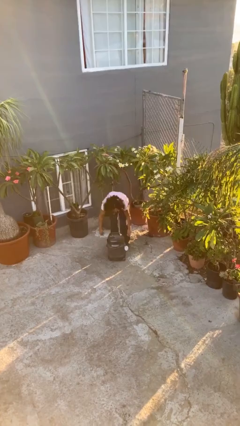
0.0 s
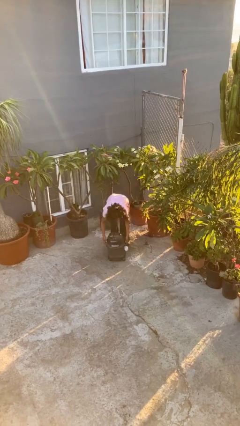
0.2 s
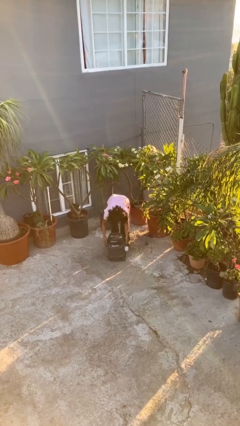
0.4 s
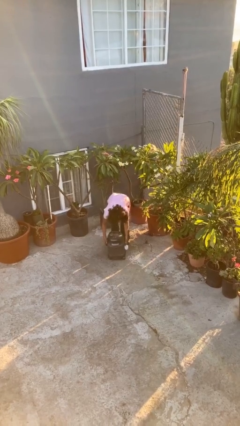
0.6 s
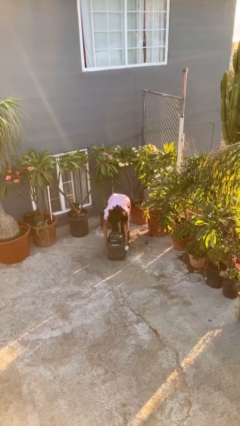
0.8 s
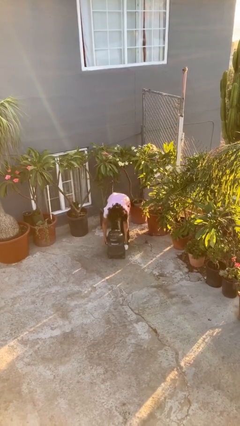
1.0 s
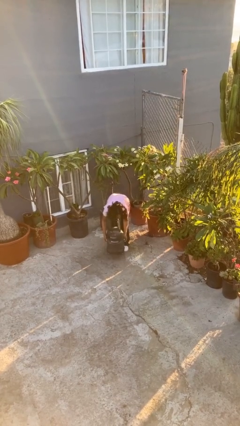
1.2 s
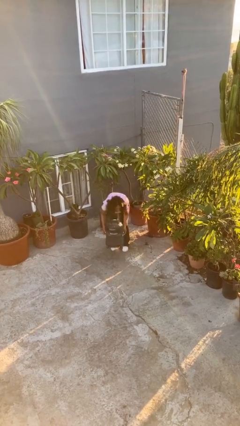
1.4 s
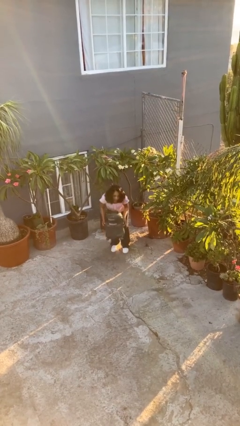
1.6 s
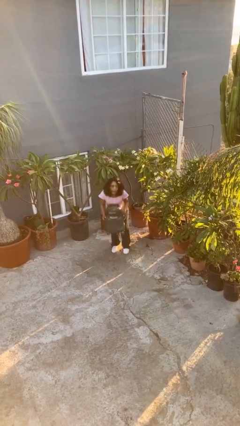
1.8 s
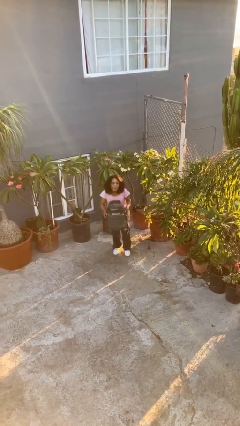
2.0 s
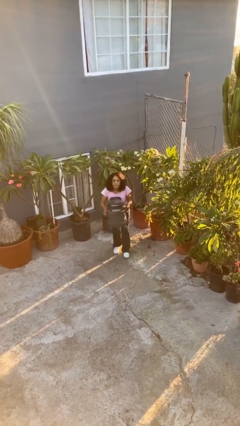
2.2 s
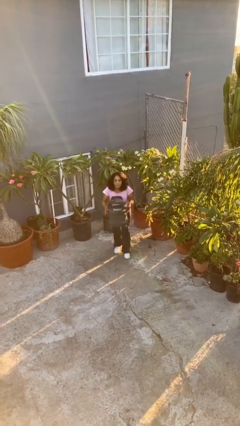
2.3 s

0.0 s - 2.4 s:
person picks up object from floor

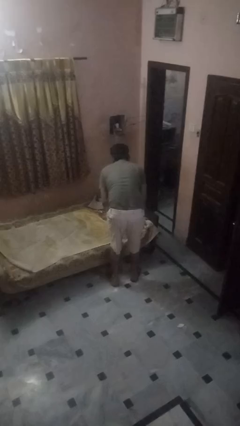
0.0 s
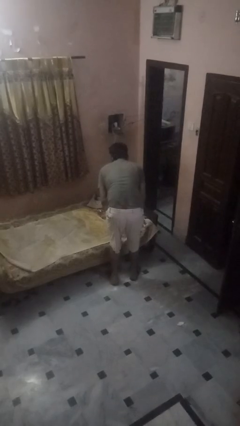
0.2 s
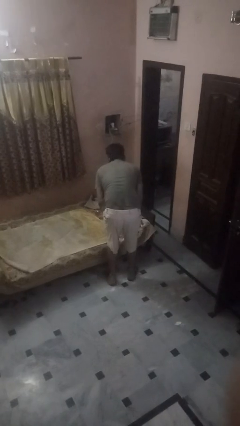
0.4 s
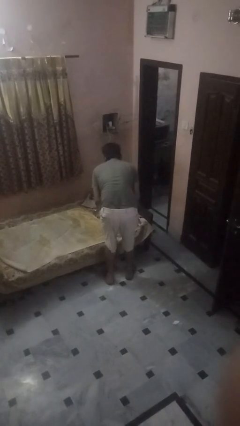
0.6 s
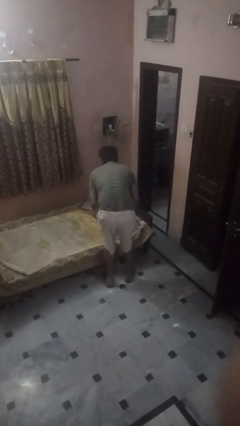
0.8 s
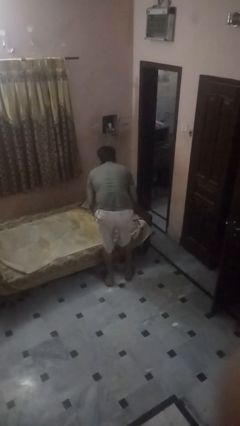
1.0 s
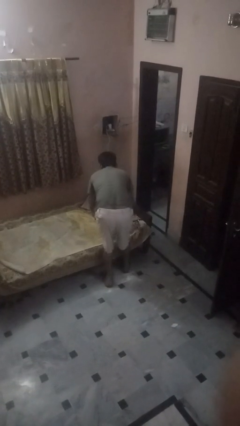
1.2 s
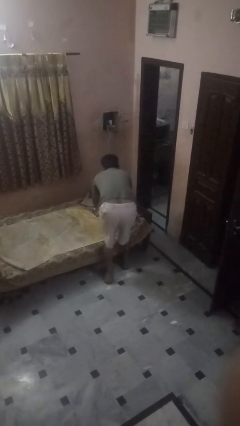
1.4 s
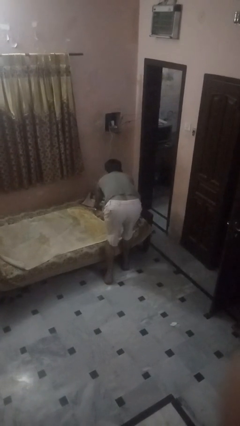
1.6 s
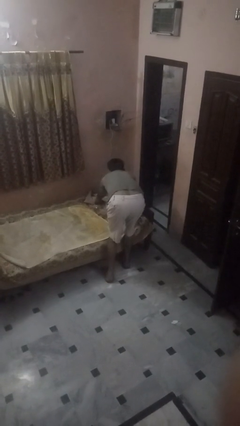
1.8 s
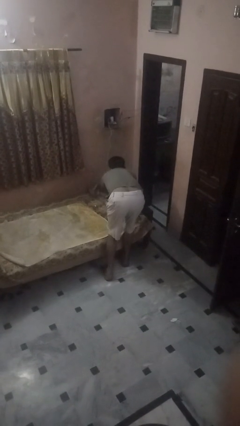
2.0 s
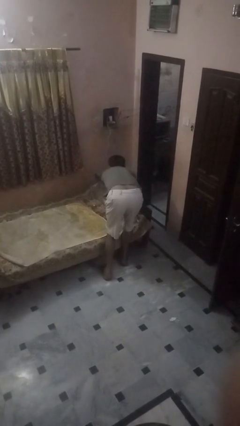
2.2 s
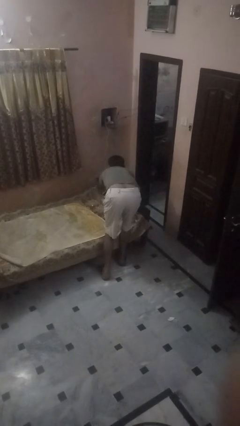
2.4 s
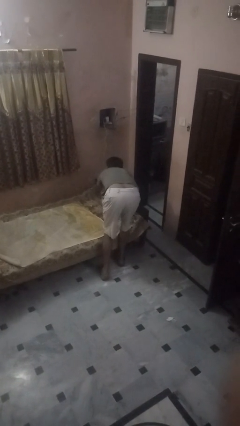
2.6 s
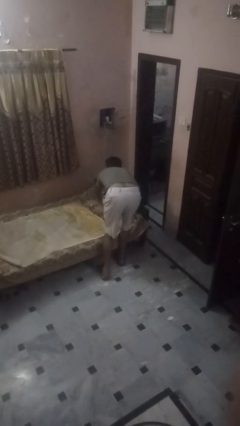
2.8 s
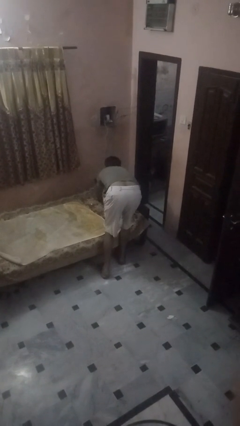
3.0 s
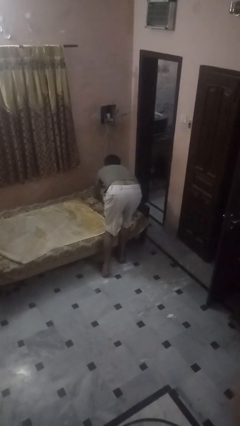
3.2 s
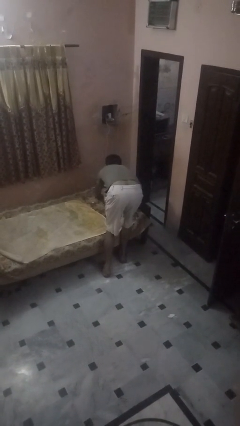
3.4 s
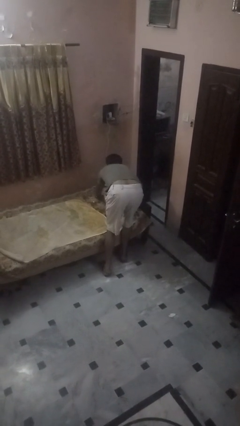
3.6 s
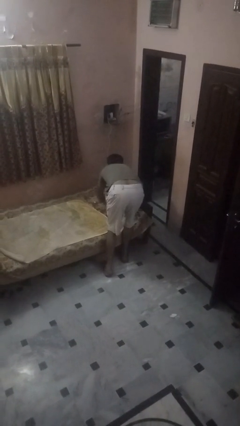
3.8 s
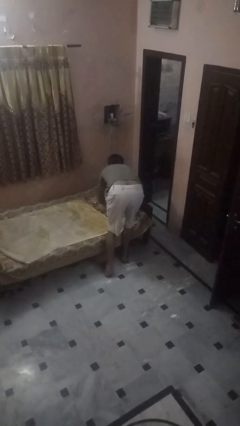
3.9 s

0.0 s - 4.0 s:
person makes bed

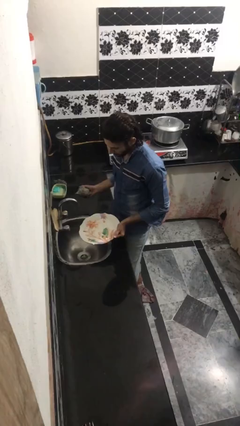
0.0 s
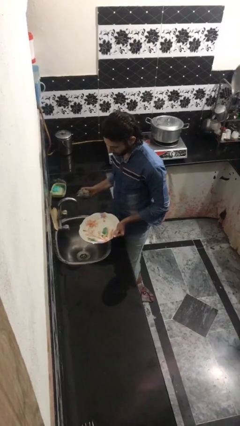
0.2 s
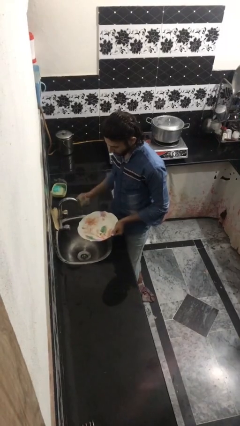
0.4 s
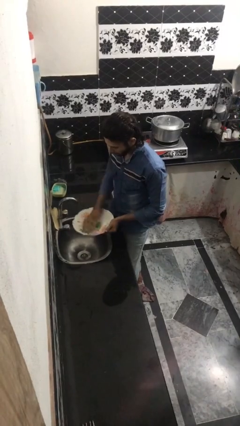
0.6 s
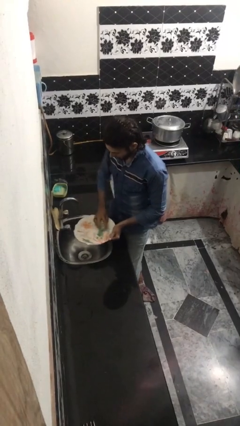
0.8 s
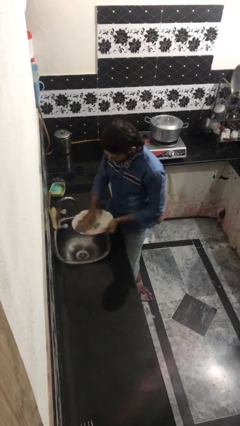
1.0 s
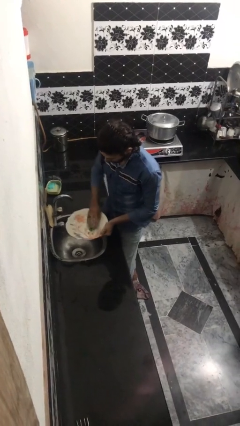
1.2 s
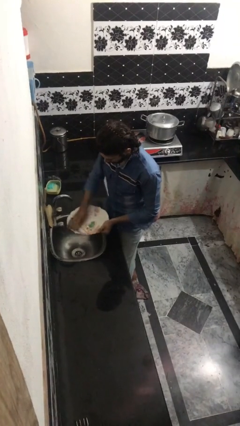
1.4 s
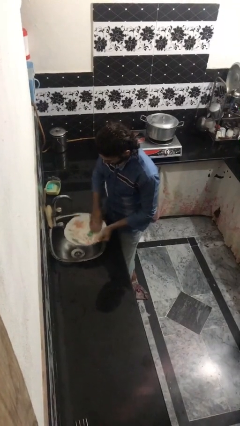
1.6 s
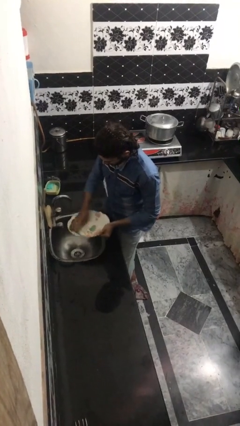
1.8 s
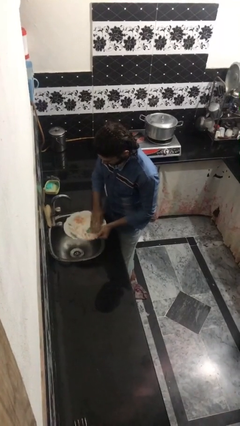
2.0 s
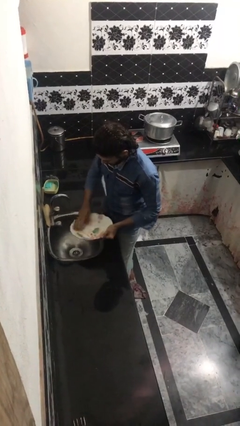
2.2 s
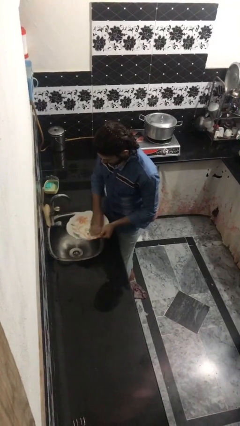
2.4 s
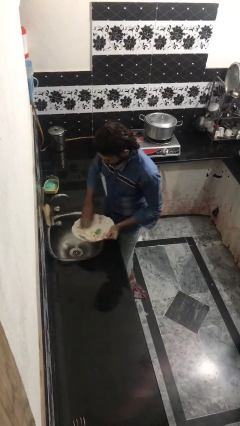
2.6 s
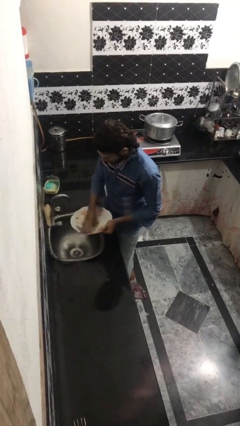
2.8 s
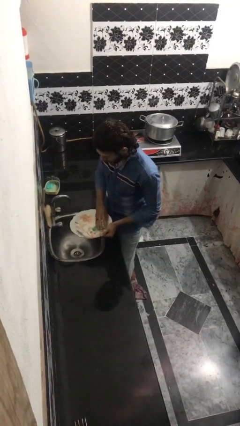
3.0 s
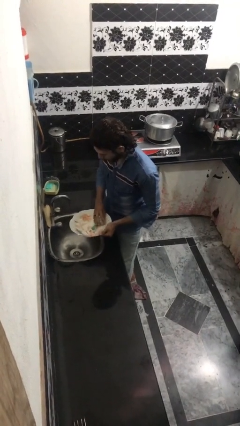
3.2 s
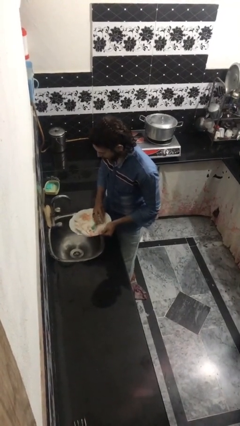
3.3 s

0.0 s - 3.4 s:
person washes dish

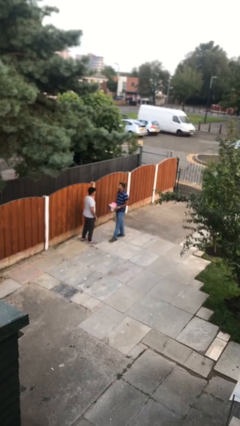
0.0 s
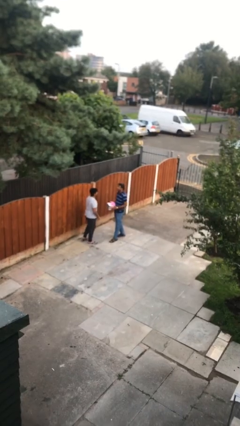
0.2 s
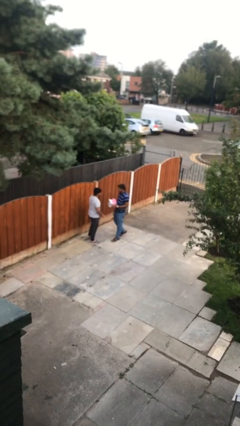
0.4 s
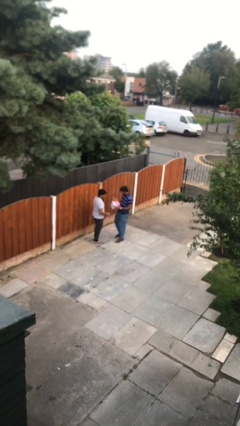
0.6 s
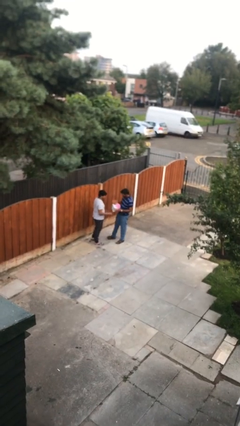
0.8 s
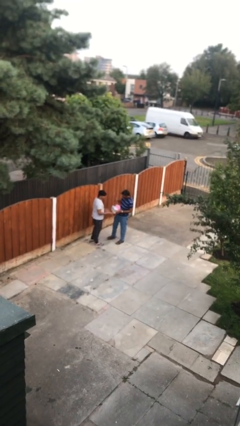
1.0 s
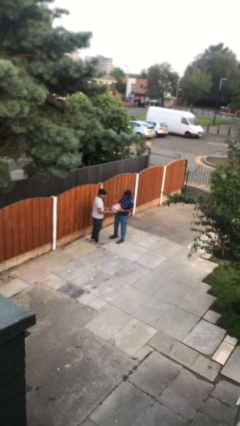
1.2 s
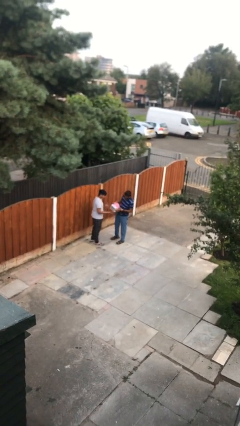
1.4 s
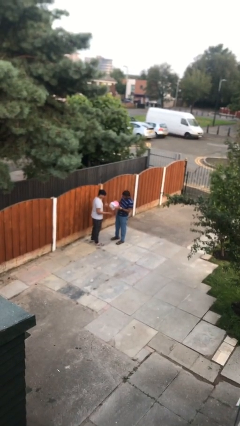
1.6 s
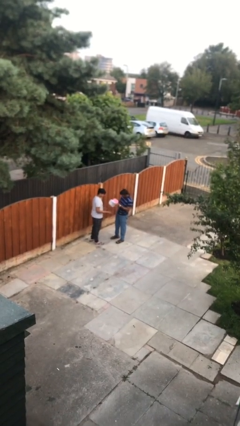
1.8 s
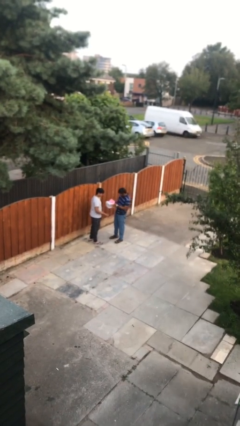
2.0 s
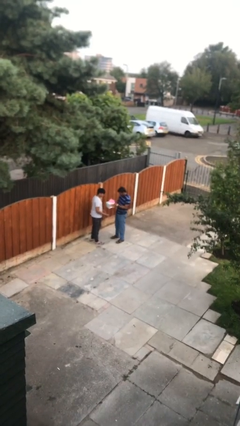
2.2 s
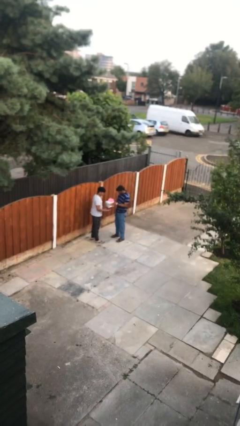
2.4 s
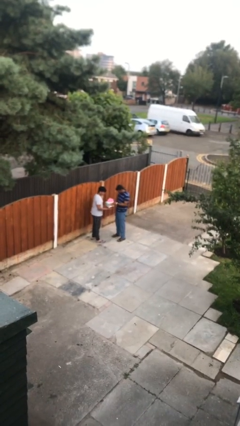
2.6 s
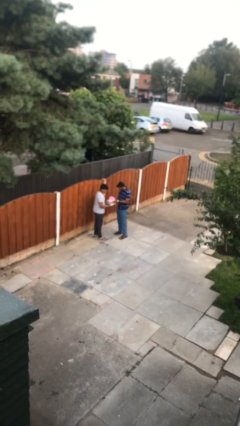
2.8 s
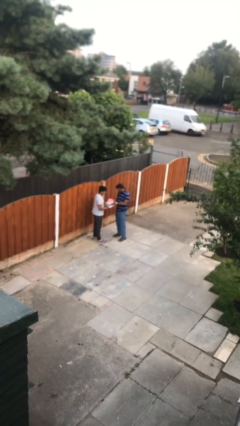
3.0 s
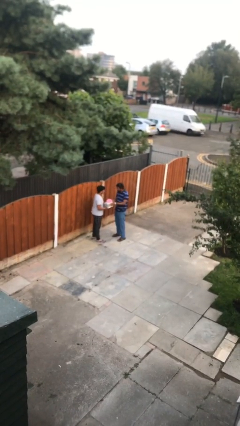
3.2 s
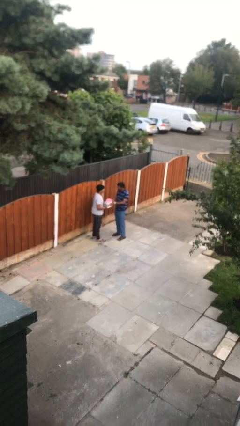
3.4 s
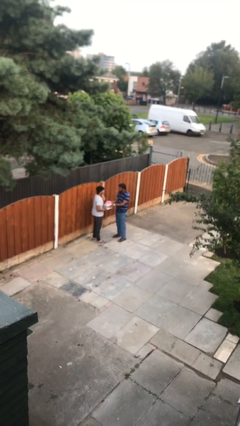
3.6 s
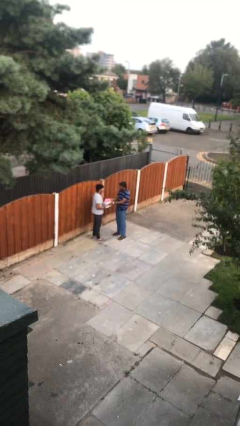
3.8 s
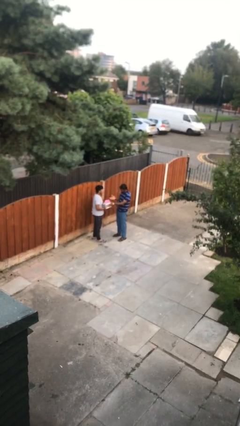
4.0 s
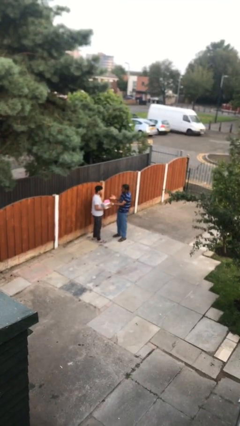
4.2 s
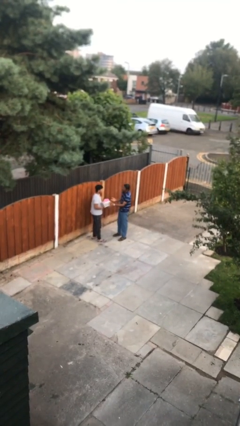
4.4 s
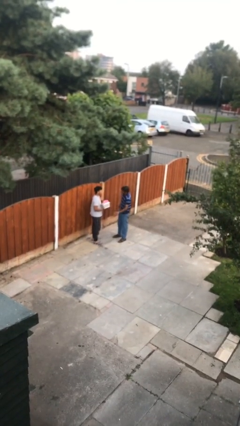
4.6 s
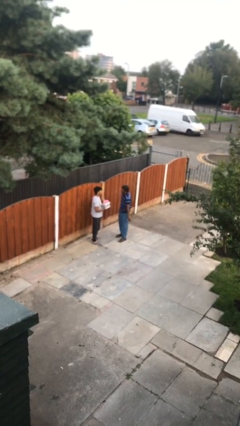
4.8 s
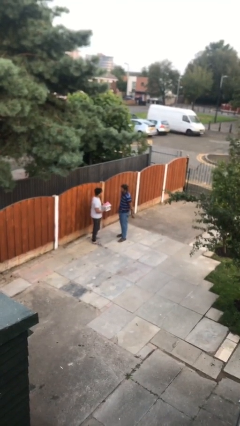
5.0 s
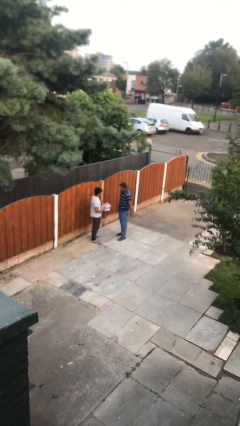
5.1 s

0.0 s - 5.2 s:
person transfers object to person

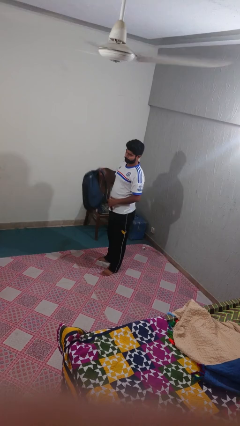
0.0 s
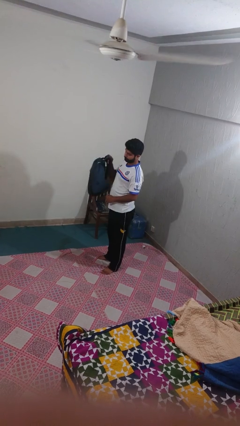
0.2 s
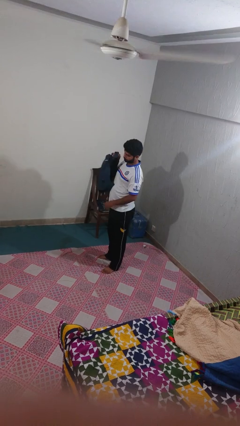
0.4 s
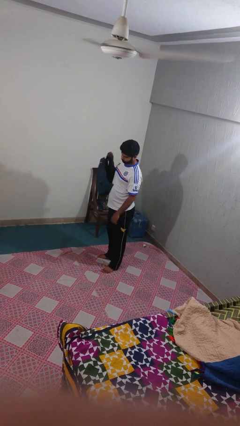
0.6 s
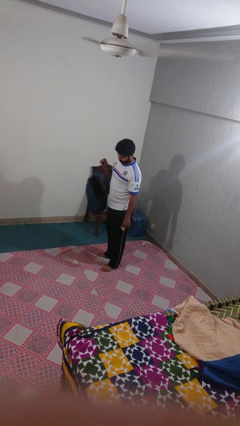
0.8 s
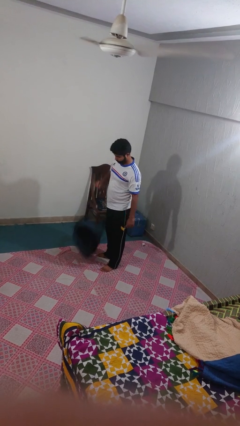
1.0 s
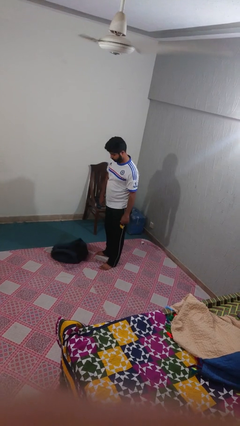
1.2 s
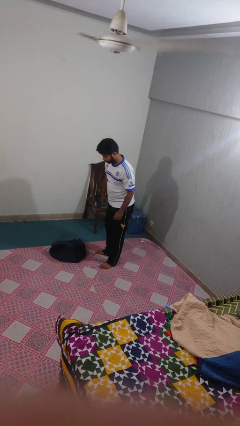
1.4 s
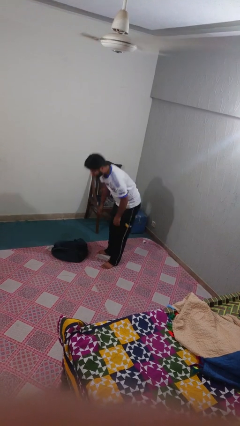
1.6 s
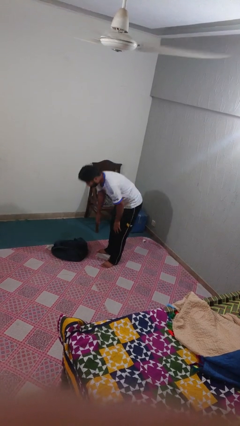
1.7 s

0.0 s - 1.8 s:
person drops object

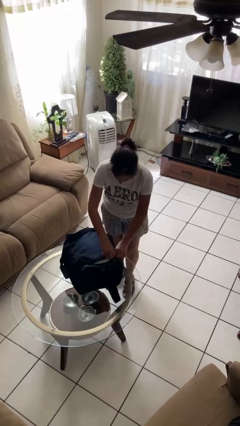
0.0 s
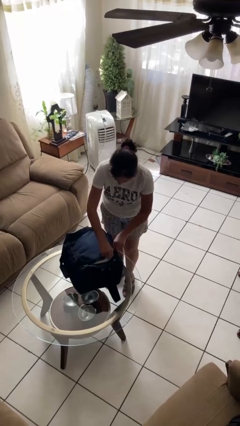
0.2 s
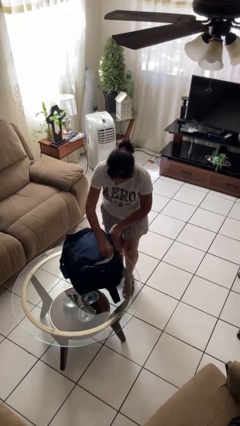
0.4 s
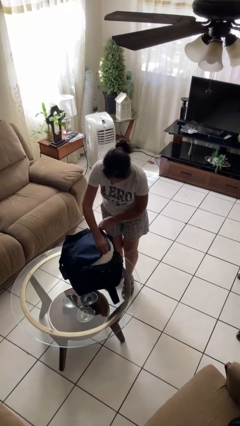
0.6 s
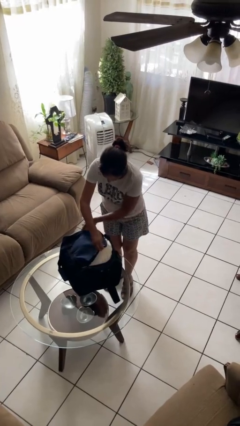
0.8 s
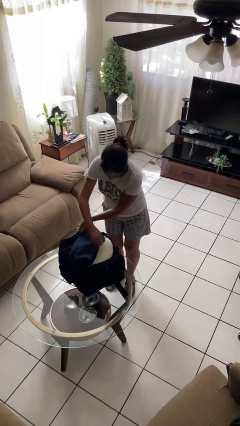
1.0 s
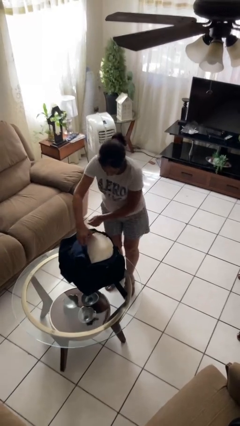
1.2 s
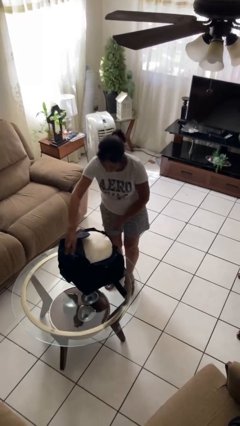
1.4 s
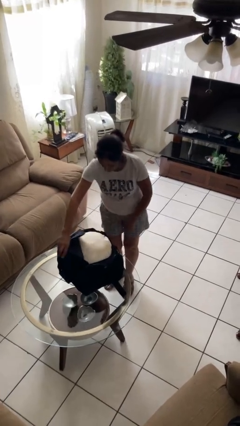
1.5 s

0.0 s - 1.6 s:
person opens suitcase
